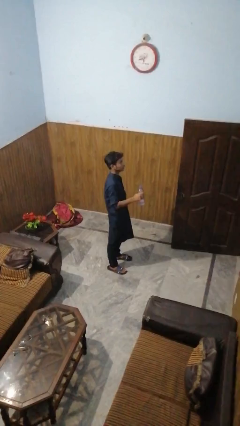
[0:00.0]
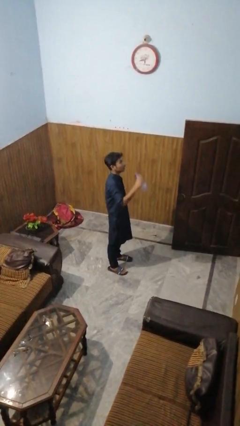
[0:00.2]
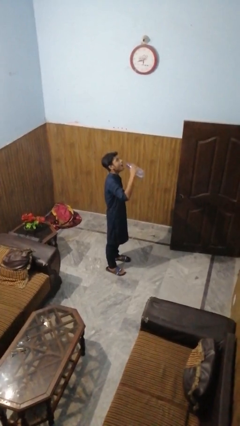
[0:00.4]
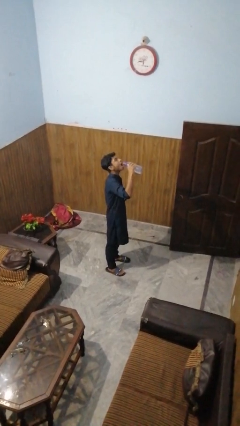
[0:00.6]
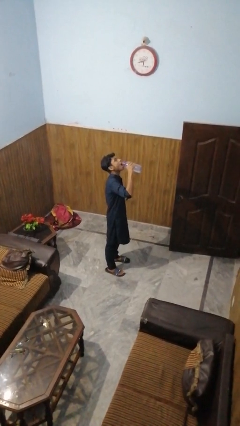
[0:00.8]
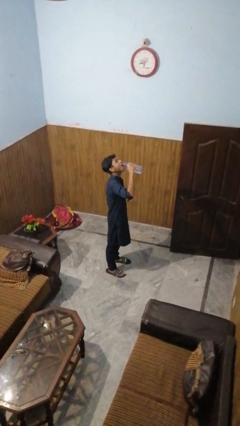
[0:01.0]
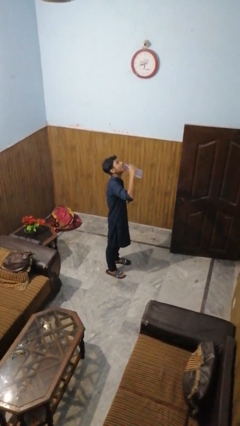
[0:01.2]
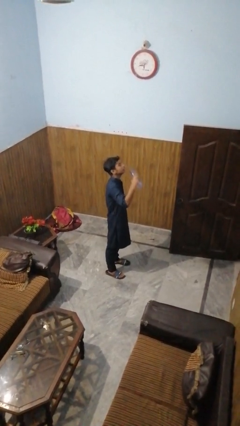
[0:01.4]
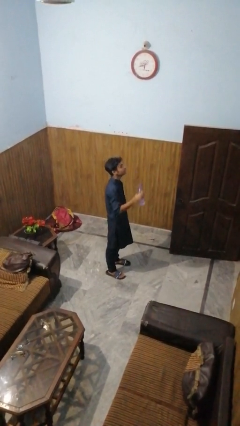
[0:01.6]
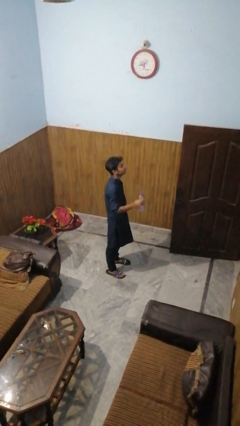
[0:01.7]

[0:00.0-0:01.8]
person drinks from bottle

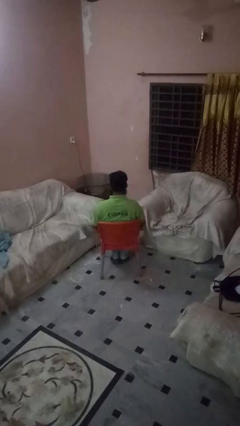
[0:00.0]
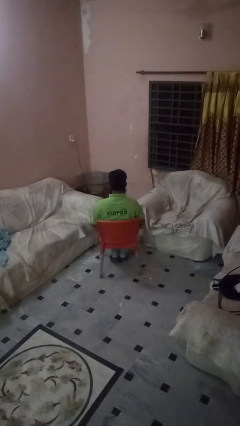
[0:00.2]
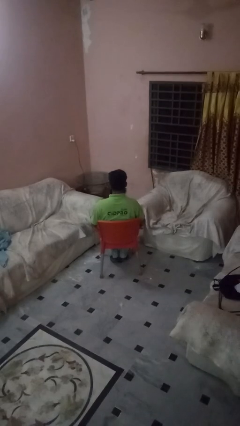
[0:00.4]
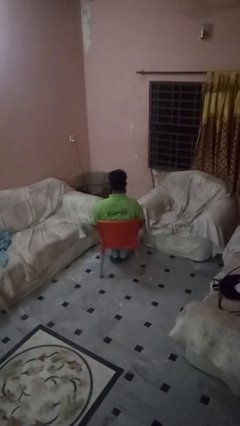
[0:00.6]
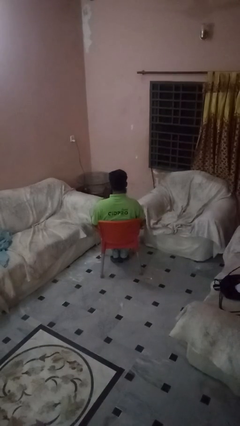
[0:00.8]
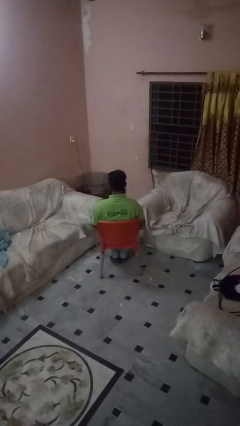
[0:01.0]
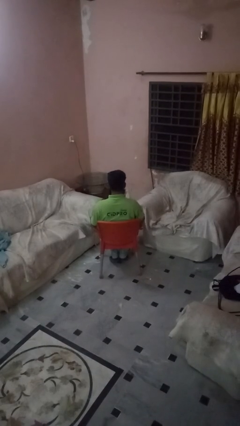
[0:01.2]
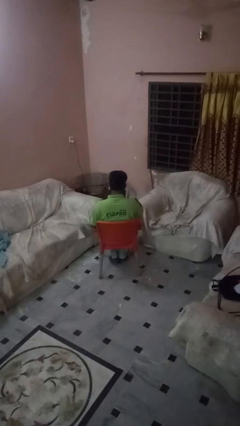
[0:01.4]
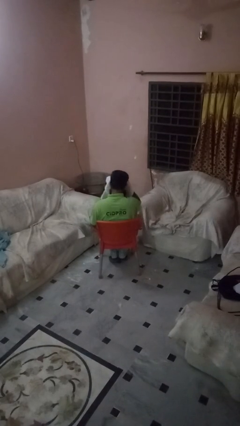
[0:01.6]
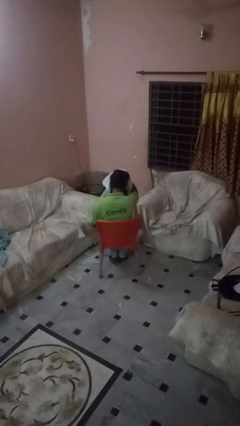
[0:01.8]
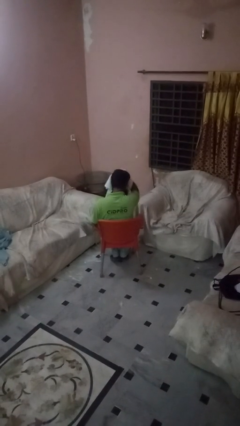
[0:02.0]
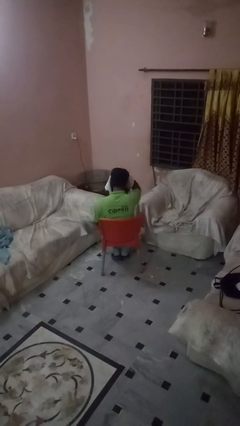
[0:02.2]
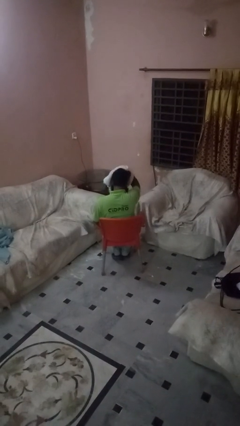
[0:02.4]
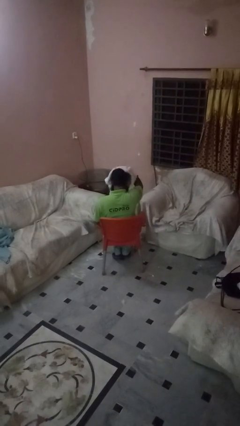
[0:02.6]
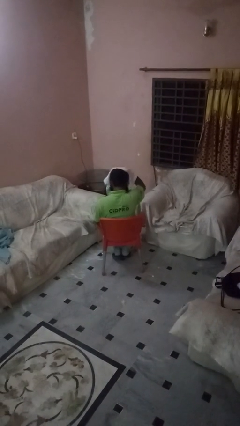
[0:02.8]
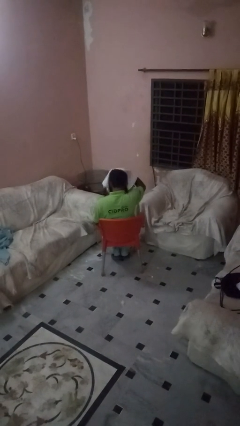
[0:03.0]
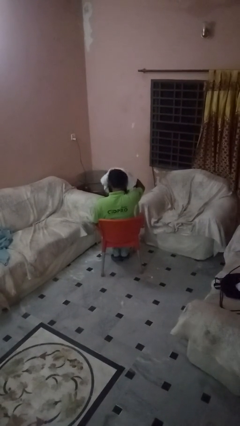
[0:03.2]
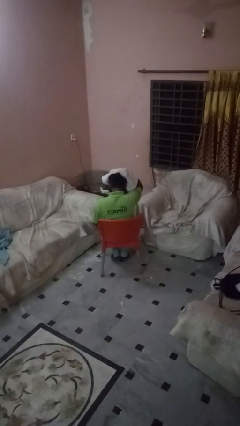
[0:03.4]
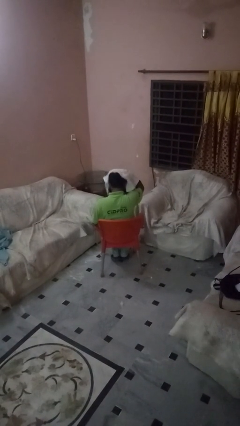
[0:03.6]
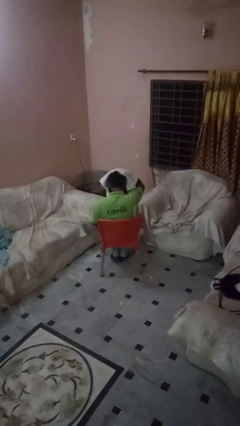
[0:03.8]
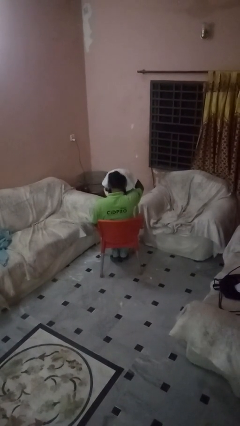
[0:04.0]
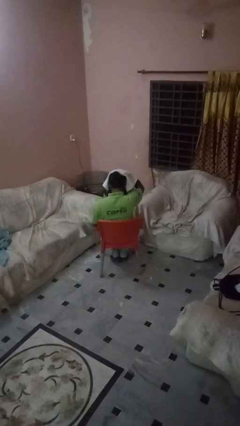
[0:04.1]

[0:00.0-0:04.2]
person dries hair with towel

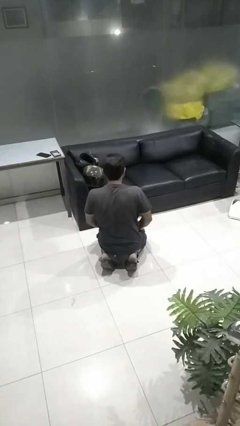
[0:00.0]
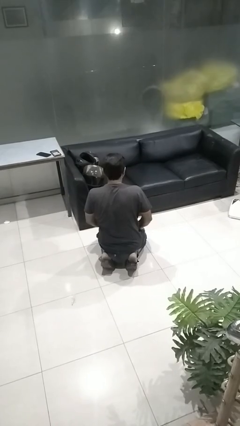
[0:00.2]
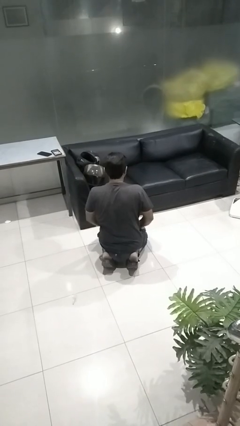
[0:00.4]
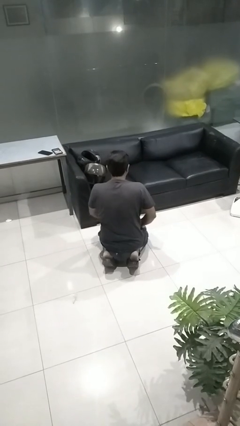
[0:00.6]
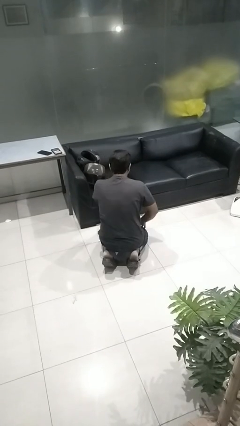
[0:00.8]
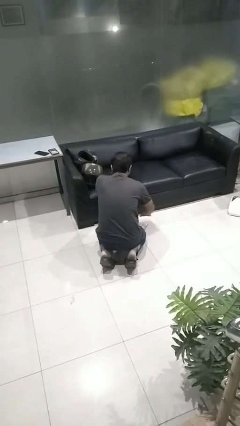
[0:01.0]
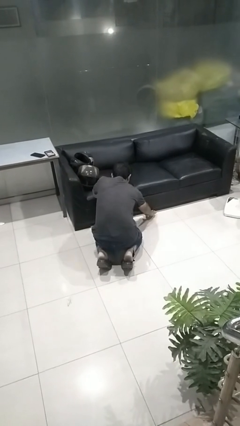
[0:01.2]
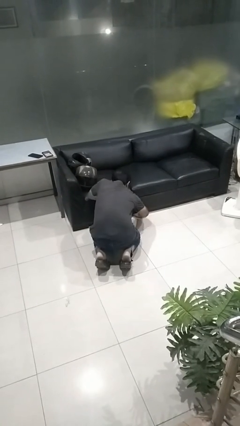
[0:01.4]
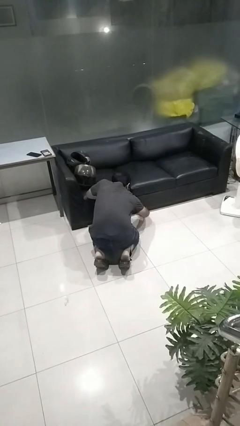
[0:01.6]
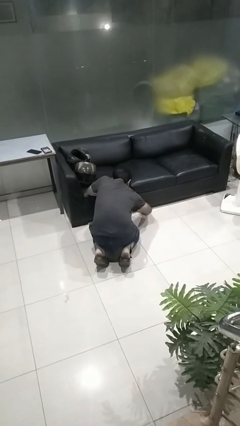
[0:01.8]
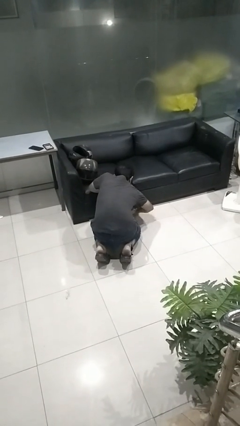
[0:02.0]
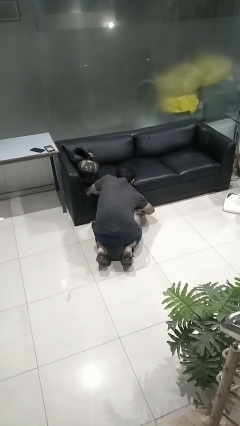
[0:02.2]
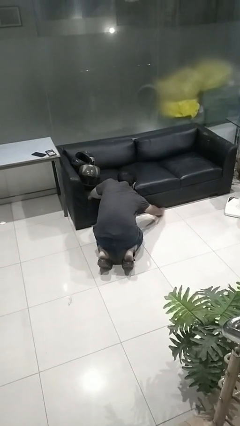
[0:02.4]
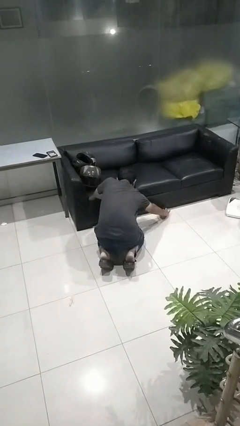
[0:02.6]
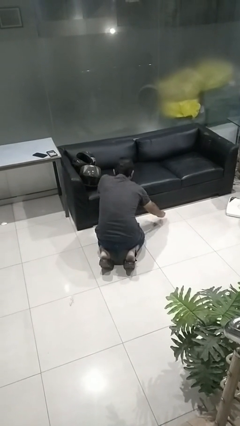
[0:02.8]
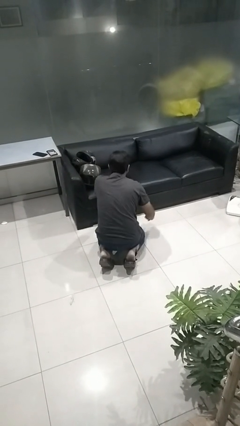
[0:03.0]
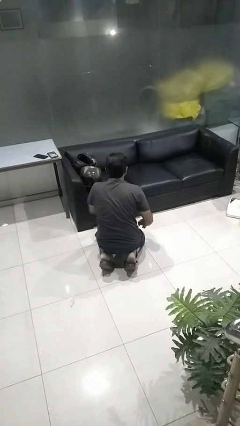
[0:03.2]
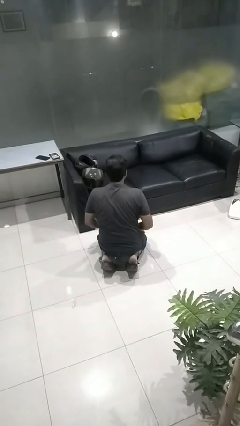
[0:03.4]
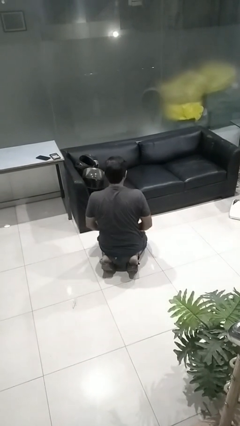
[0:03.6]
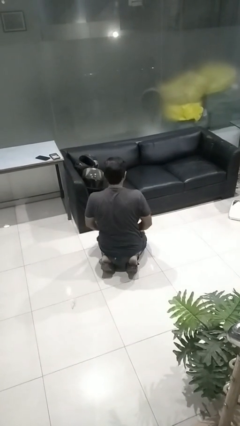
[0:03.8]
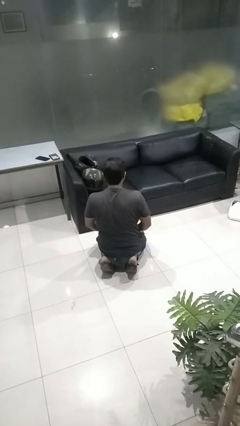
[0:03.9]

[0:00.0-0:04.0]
person searches under couch

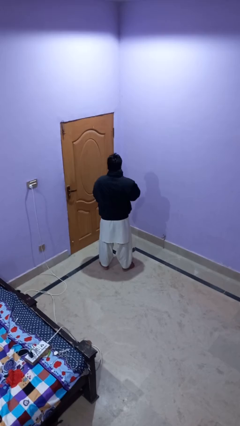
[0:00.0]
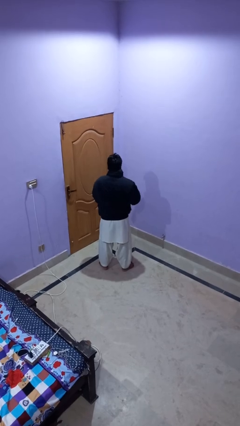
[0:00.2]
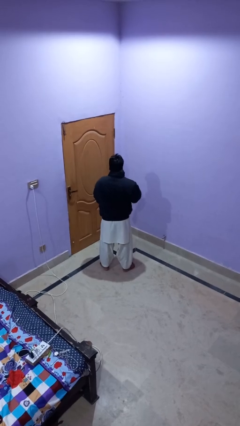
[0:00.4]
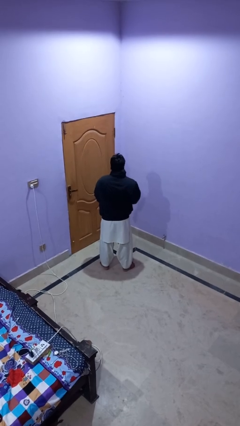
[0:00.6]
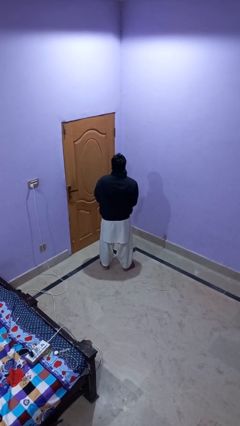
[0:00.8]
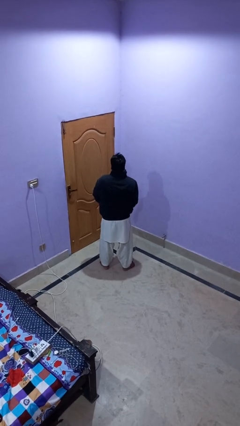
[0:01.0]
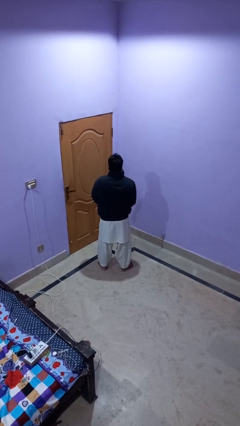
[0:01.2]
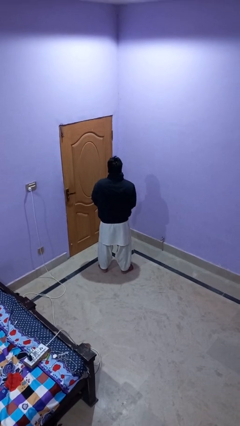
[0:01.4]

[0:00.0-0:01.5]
person unzips jacket

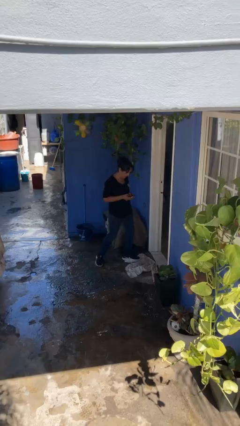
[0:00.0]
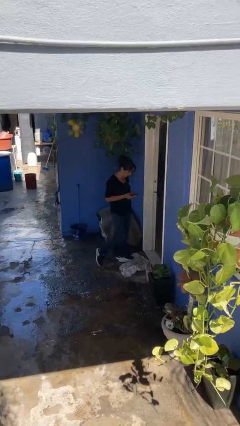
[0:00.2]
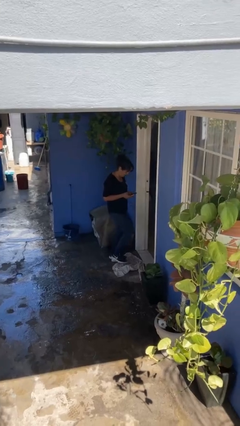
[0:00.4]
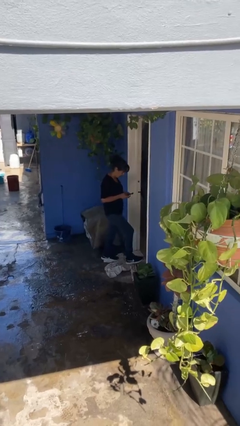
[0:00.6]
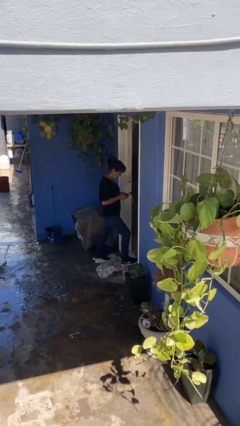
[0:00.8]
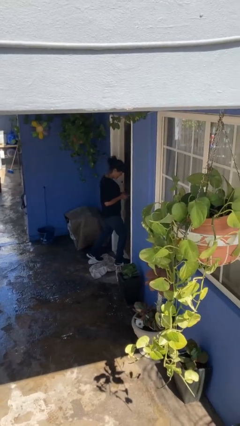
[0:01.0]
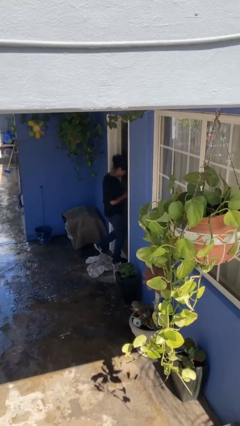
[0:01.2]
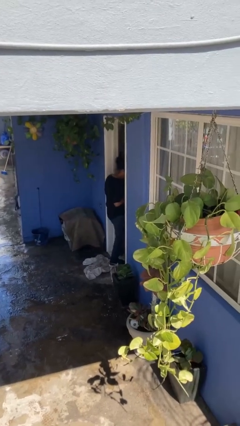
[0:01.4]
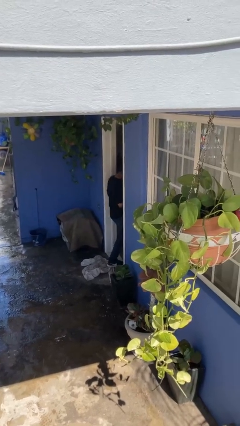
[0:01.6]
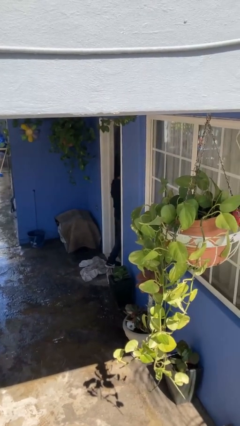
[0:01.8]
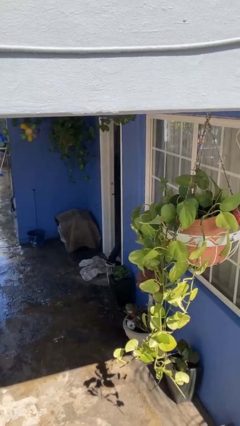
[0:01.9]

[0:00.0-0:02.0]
person exits scene through structure

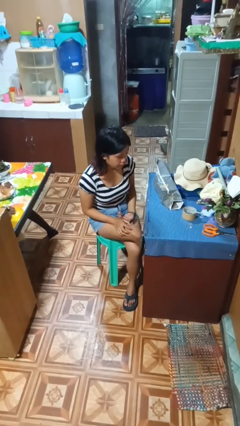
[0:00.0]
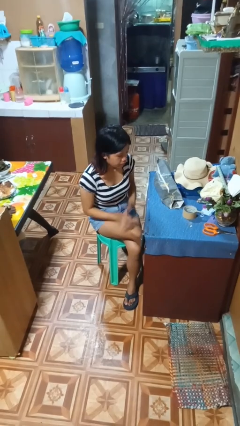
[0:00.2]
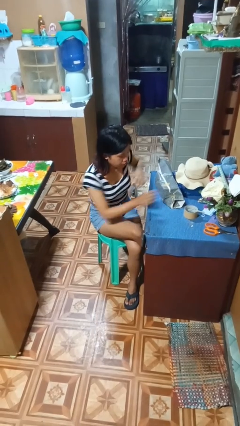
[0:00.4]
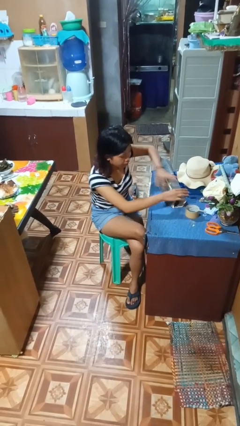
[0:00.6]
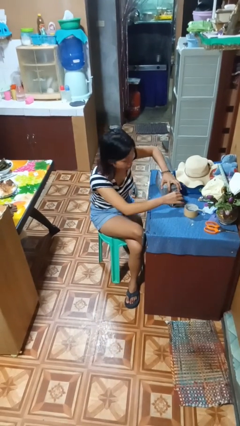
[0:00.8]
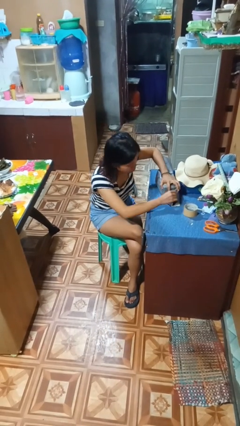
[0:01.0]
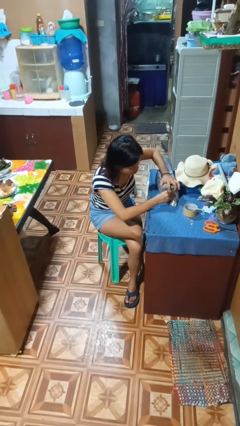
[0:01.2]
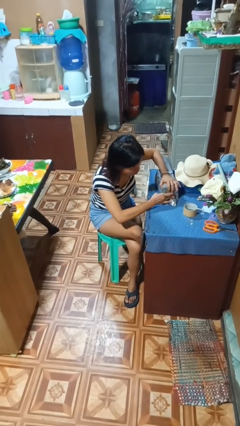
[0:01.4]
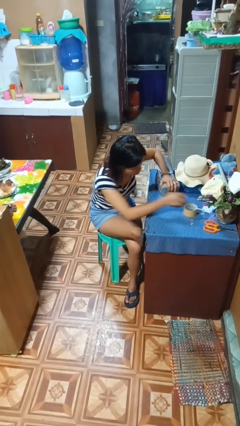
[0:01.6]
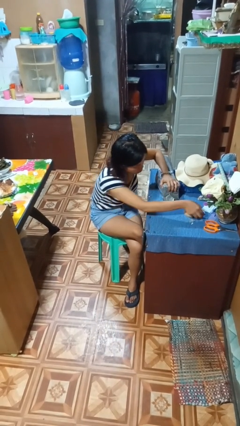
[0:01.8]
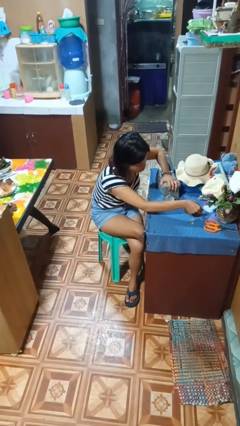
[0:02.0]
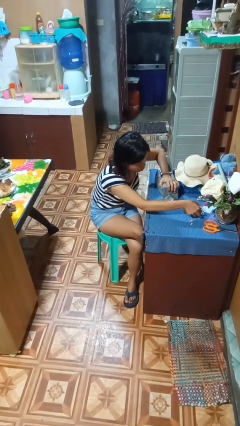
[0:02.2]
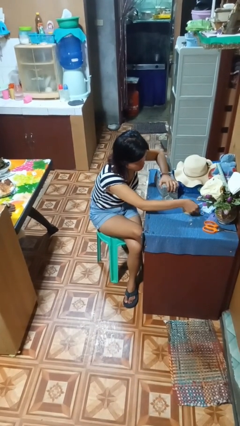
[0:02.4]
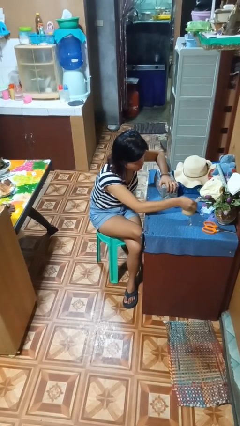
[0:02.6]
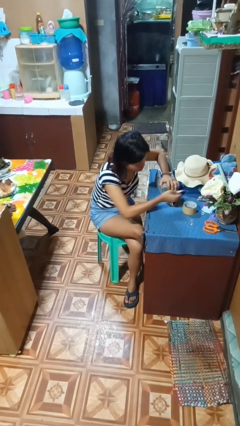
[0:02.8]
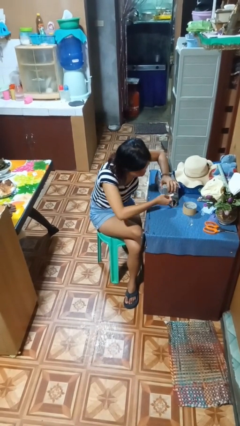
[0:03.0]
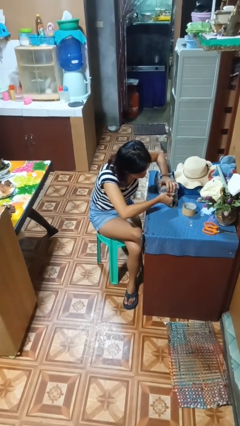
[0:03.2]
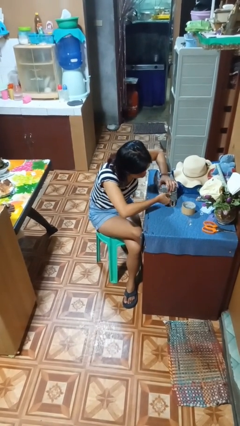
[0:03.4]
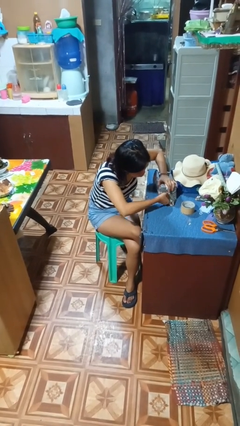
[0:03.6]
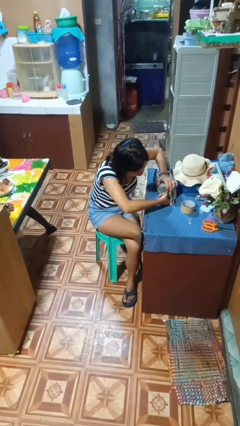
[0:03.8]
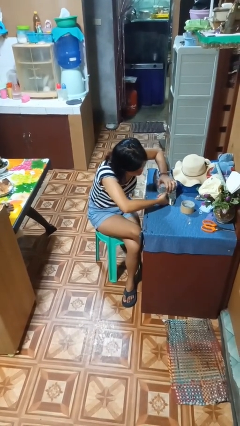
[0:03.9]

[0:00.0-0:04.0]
person wraps box
